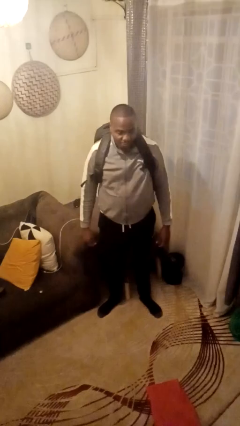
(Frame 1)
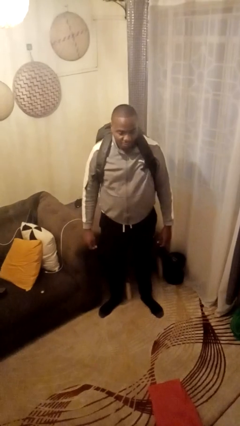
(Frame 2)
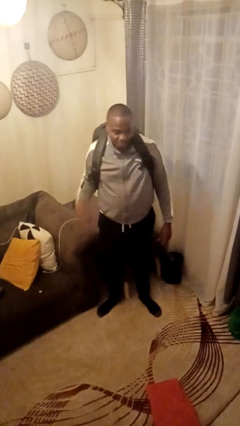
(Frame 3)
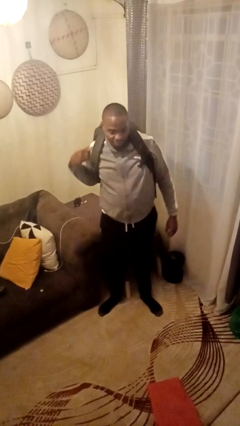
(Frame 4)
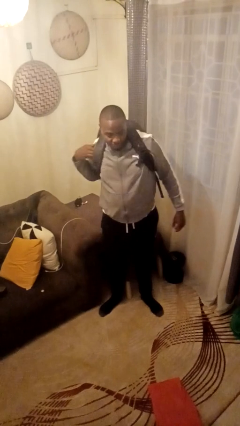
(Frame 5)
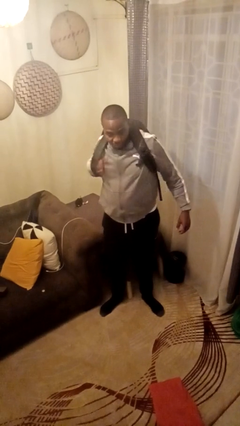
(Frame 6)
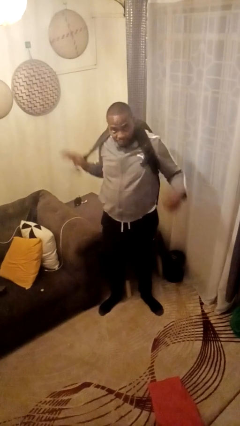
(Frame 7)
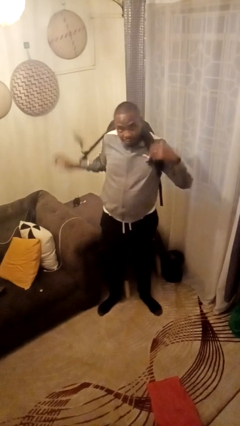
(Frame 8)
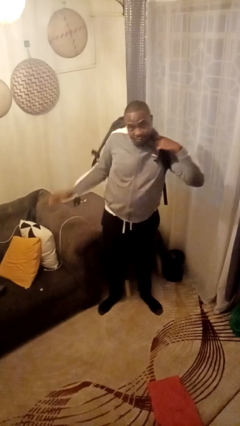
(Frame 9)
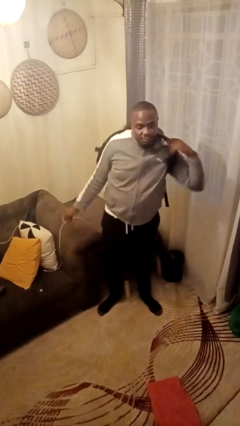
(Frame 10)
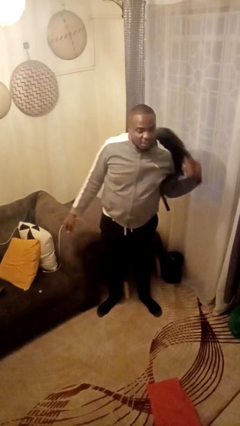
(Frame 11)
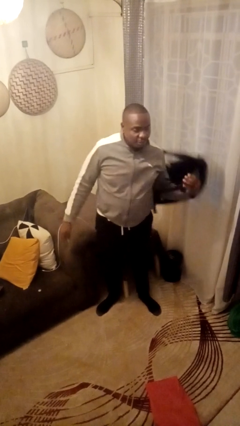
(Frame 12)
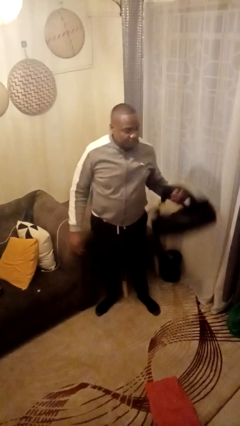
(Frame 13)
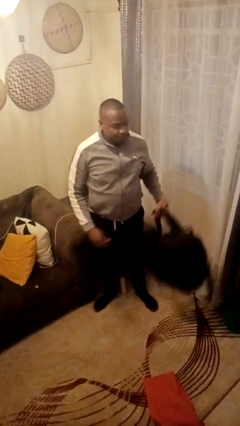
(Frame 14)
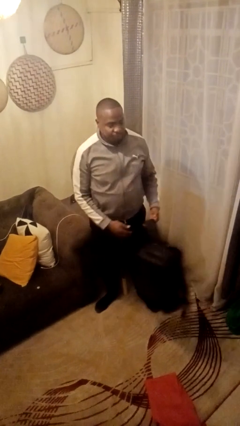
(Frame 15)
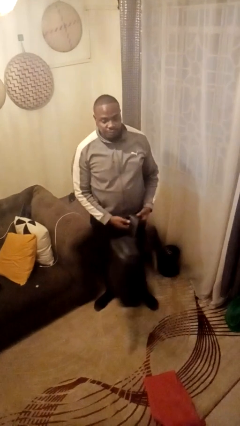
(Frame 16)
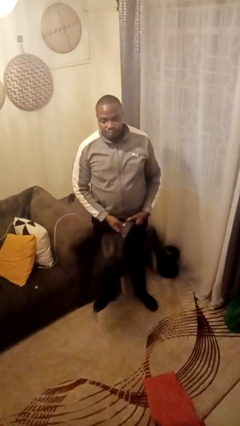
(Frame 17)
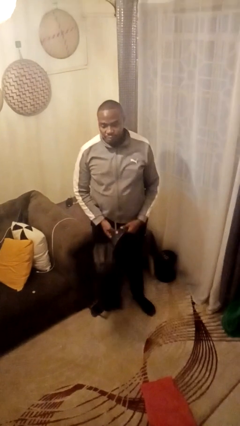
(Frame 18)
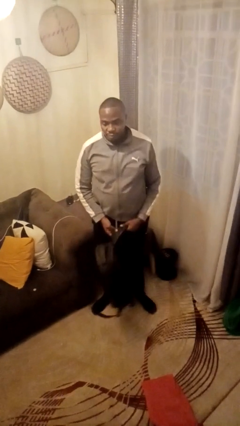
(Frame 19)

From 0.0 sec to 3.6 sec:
person takes off backpack

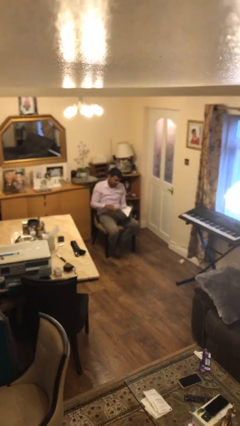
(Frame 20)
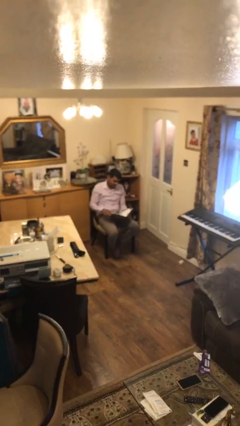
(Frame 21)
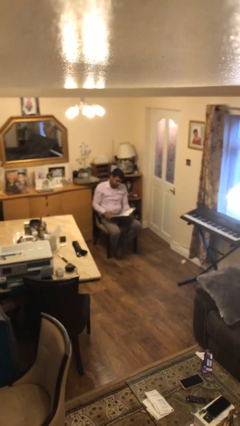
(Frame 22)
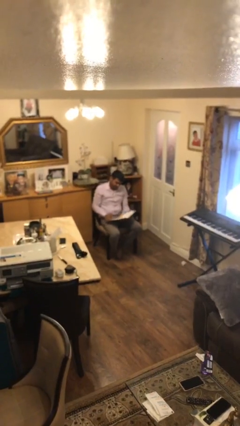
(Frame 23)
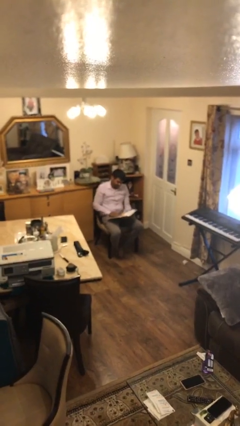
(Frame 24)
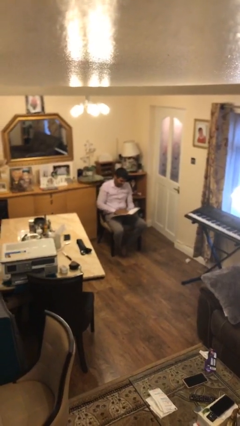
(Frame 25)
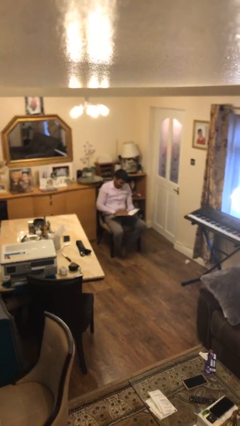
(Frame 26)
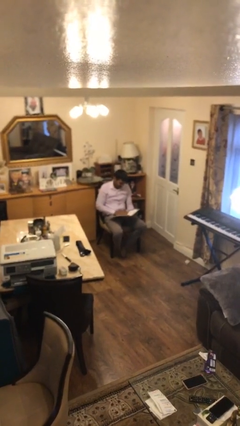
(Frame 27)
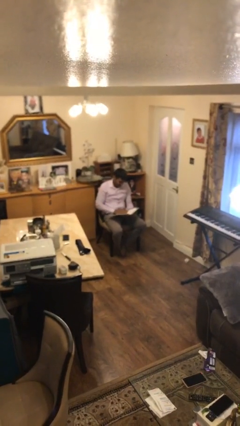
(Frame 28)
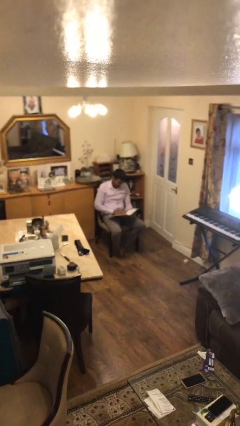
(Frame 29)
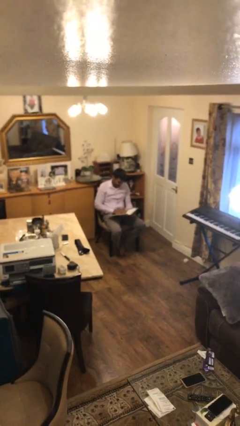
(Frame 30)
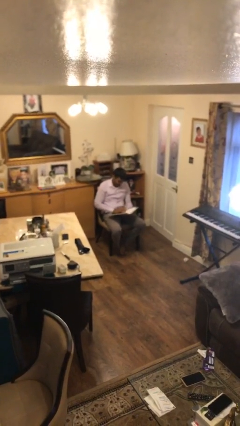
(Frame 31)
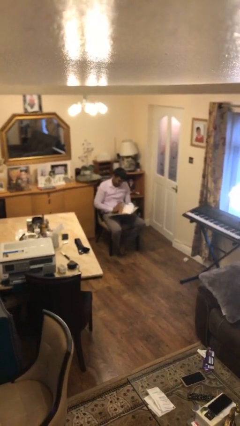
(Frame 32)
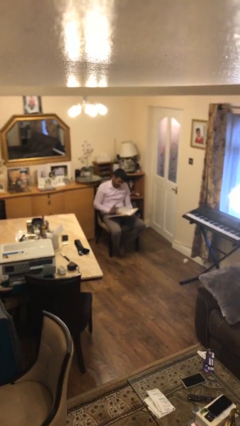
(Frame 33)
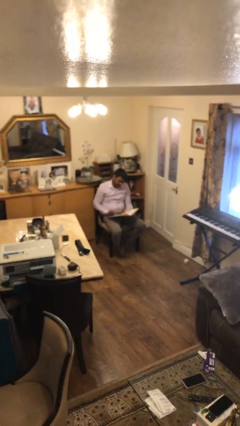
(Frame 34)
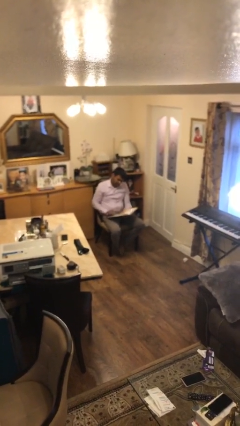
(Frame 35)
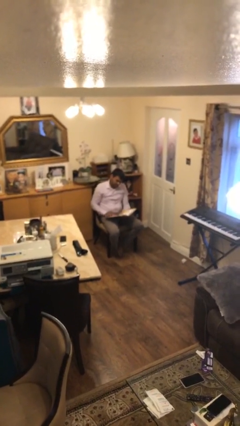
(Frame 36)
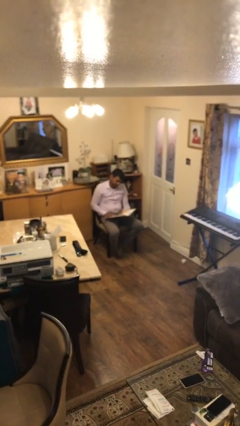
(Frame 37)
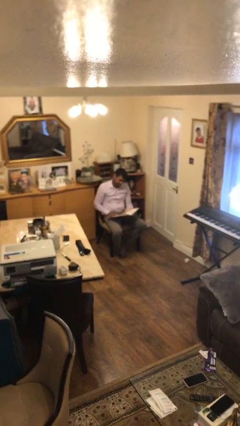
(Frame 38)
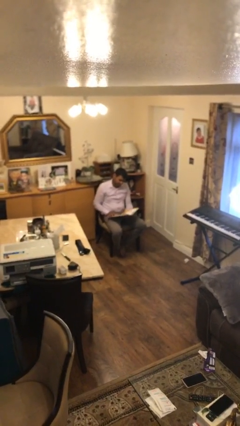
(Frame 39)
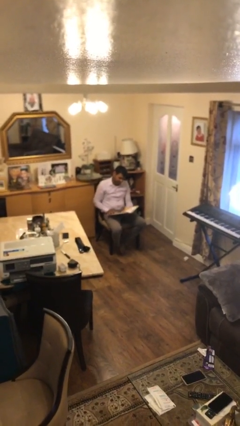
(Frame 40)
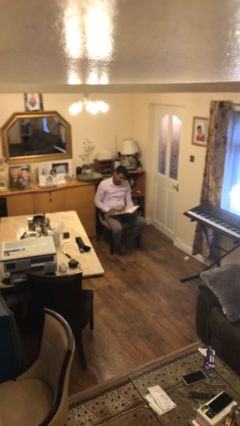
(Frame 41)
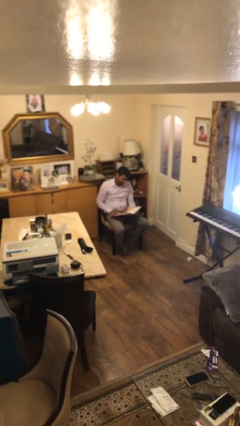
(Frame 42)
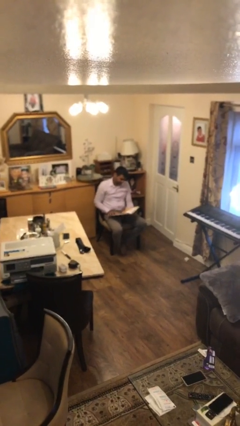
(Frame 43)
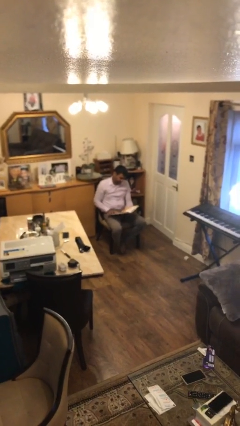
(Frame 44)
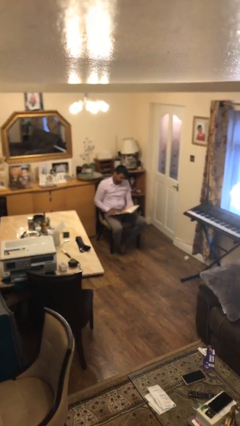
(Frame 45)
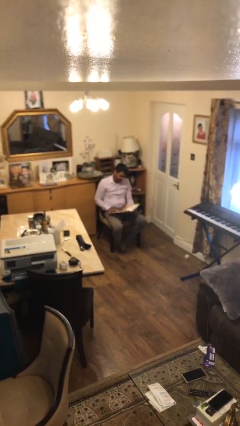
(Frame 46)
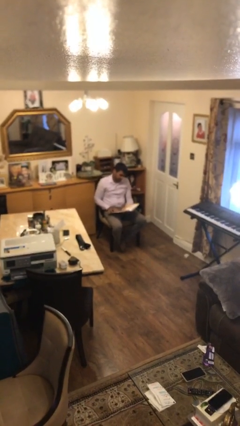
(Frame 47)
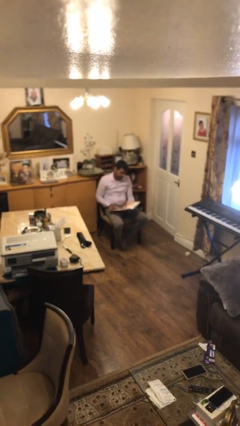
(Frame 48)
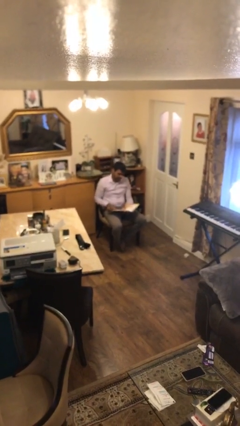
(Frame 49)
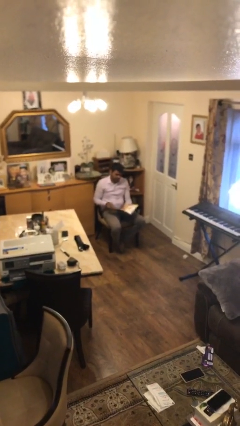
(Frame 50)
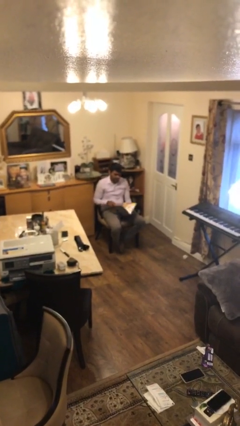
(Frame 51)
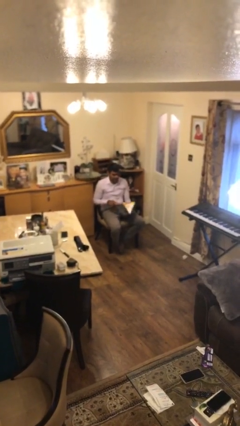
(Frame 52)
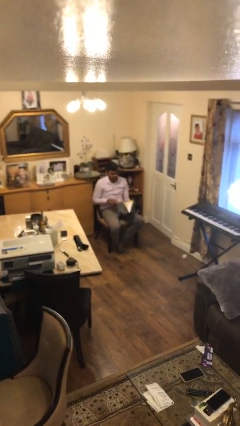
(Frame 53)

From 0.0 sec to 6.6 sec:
person reads document

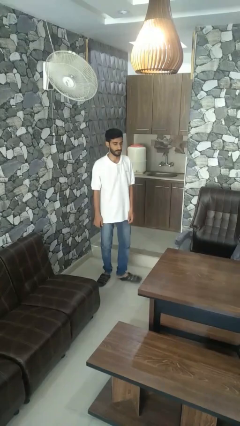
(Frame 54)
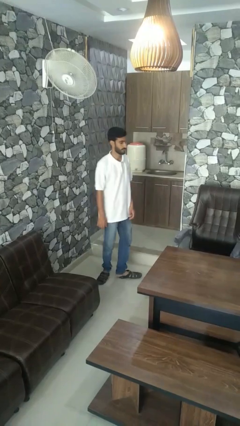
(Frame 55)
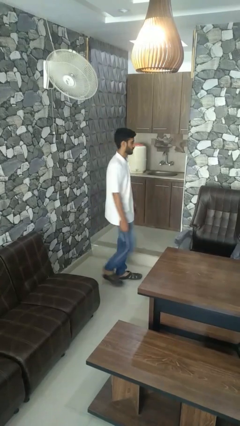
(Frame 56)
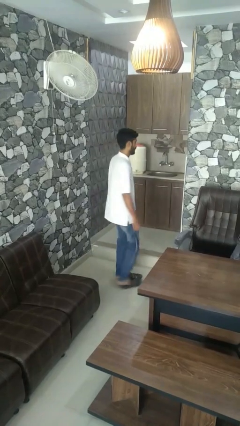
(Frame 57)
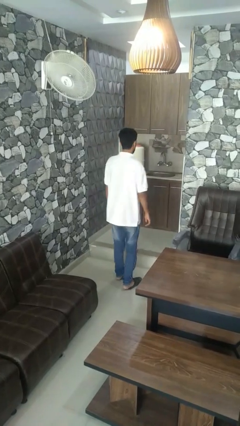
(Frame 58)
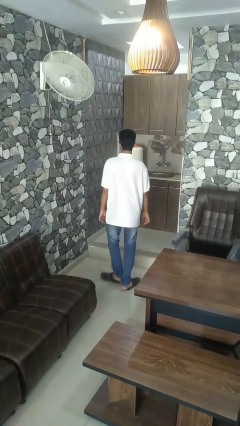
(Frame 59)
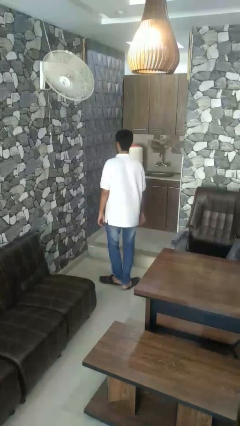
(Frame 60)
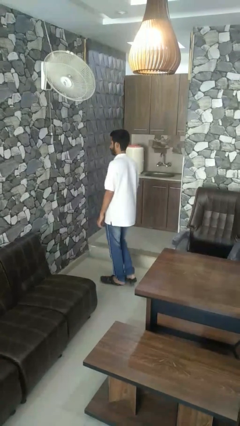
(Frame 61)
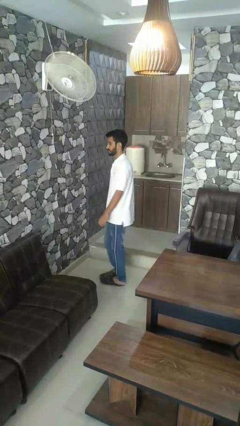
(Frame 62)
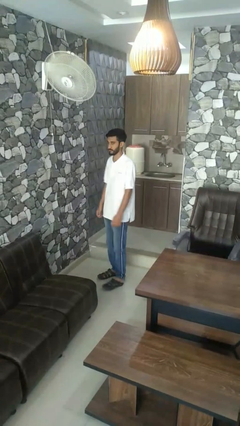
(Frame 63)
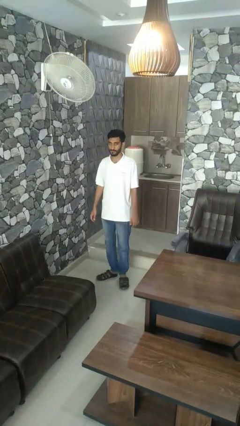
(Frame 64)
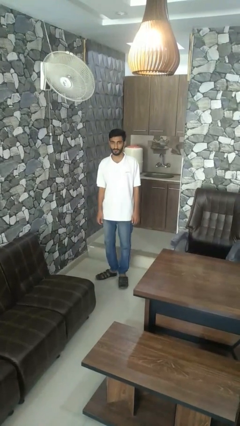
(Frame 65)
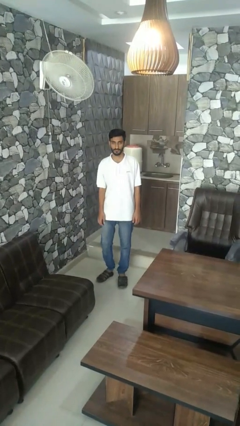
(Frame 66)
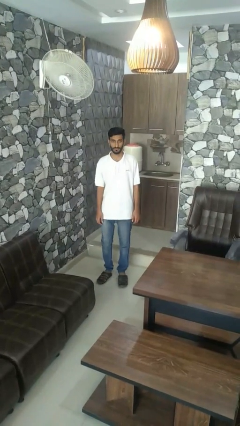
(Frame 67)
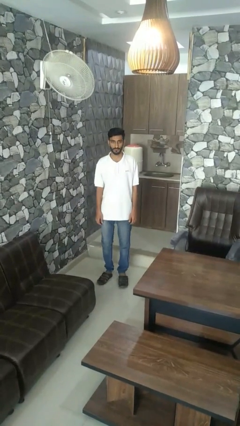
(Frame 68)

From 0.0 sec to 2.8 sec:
person twirls

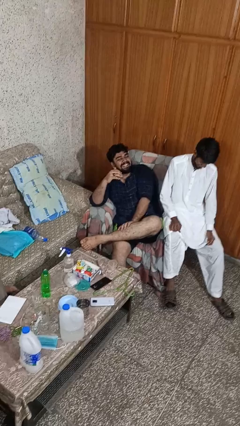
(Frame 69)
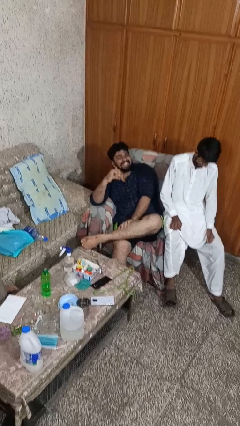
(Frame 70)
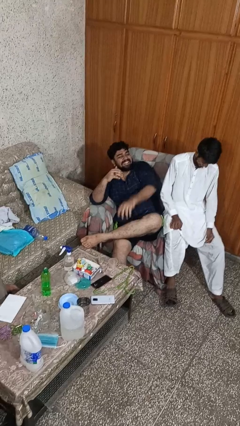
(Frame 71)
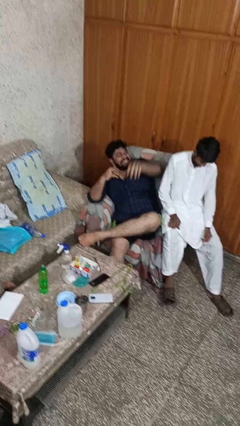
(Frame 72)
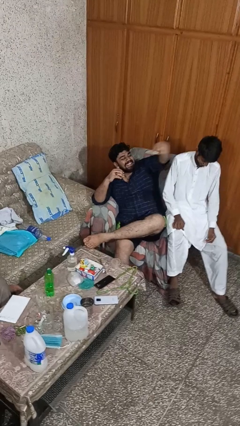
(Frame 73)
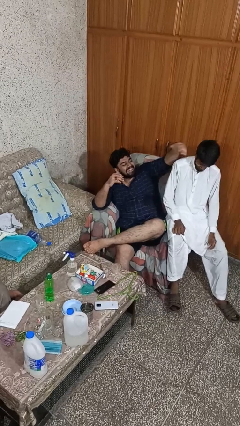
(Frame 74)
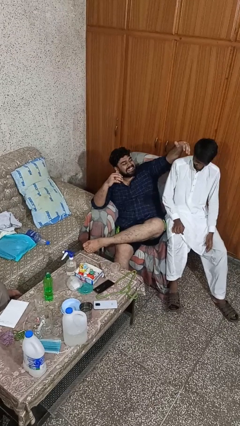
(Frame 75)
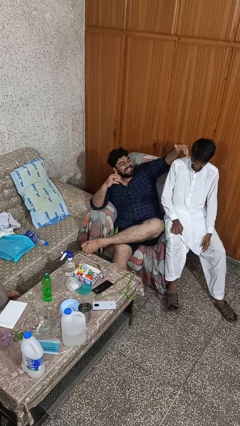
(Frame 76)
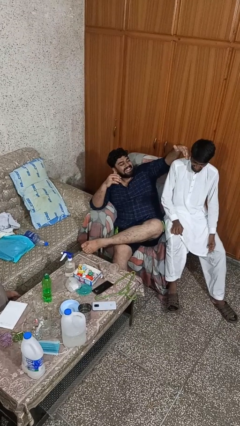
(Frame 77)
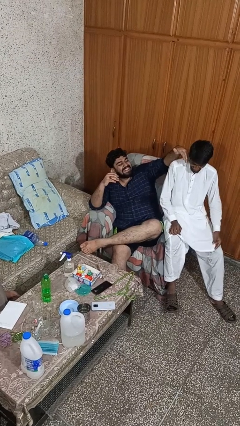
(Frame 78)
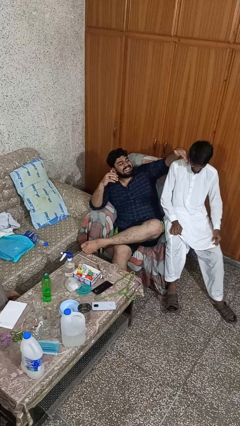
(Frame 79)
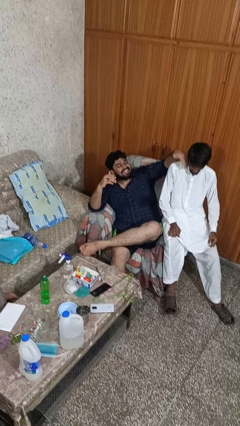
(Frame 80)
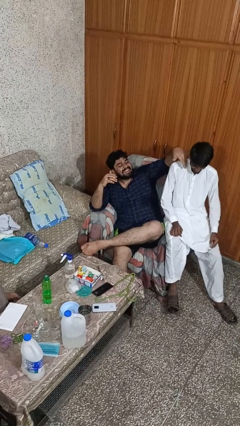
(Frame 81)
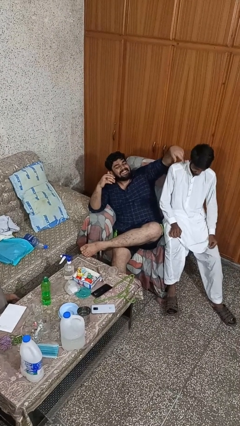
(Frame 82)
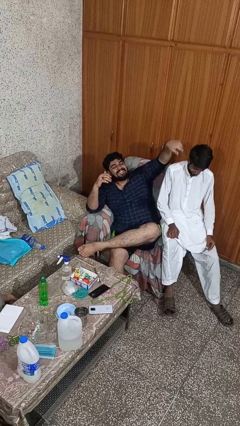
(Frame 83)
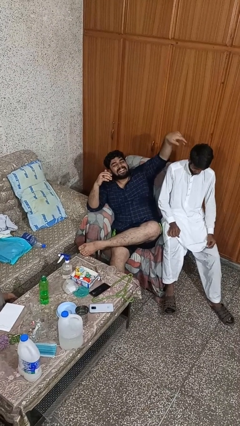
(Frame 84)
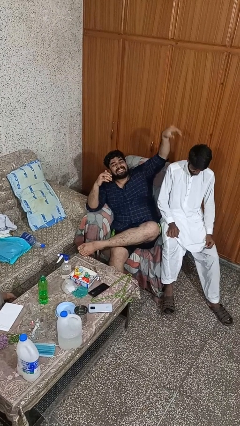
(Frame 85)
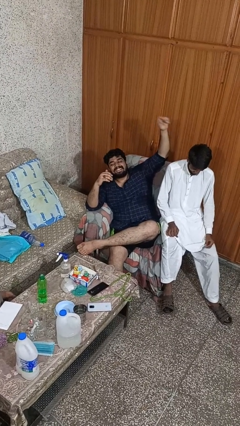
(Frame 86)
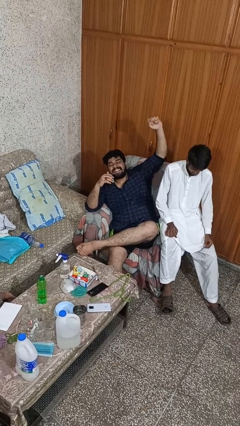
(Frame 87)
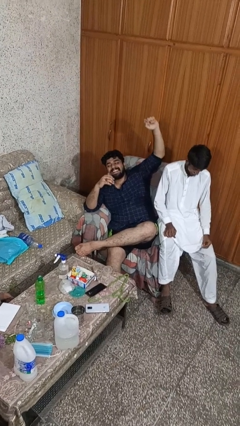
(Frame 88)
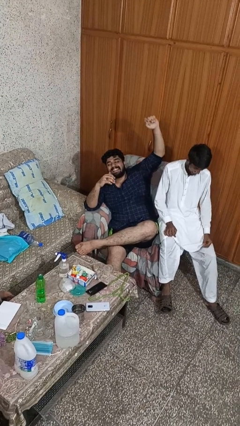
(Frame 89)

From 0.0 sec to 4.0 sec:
person touches face of person

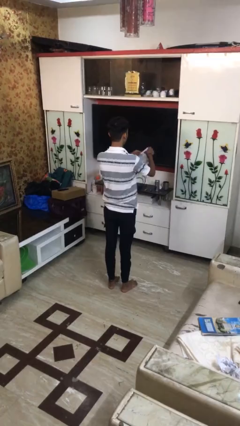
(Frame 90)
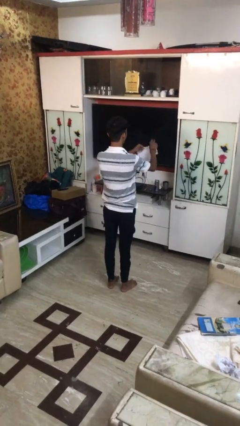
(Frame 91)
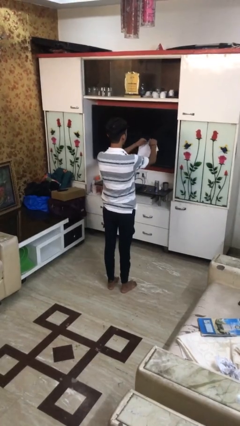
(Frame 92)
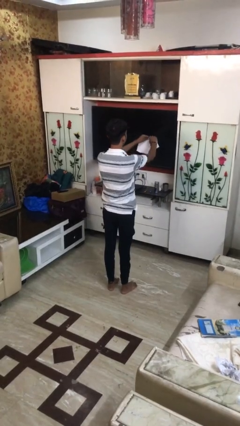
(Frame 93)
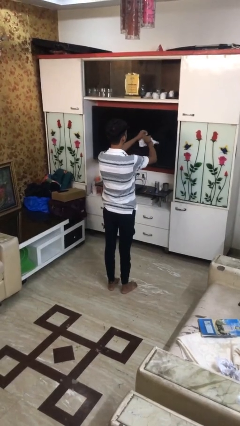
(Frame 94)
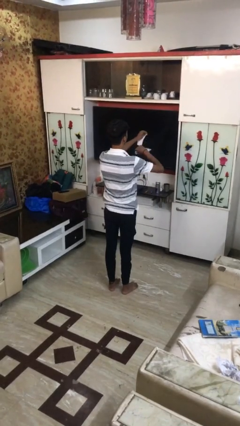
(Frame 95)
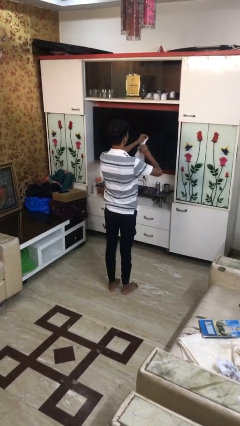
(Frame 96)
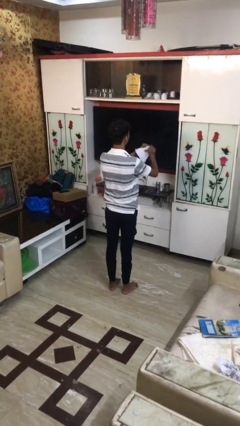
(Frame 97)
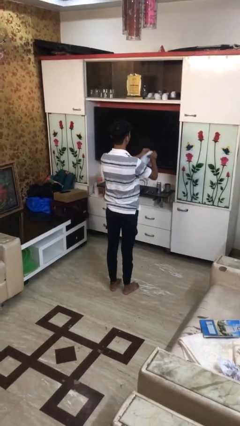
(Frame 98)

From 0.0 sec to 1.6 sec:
person tears paper
